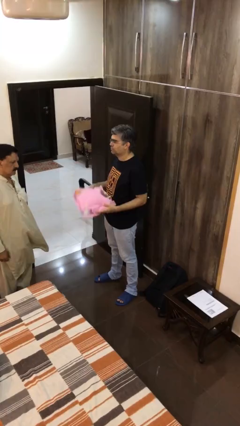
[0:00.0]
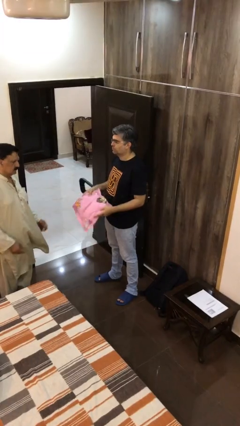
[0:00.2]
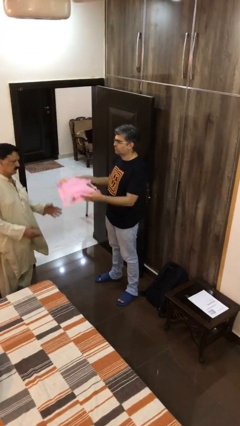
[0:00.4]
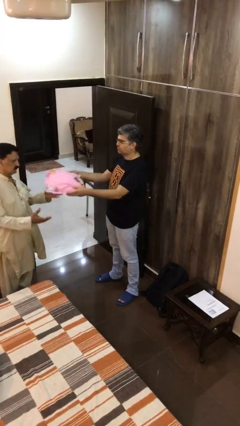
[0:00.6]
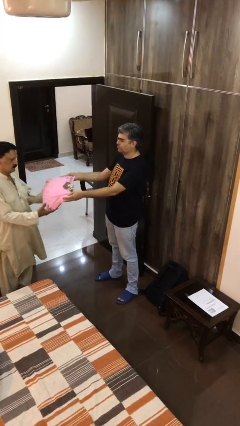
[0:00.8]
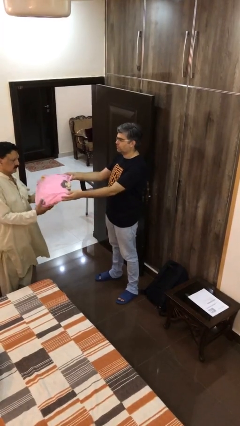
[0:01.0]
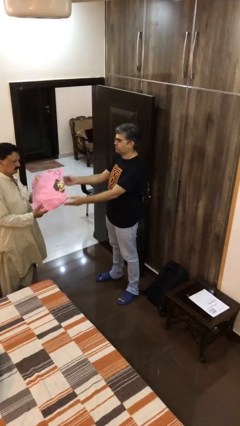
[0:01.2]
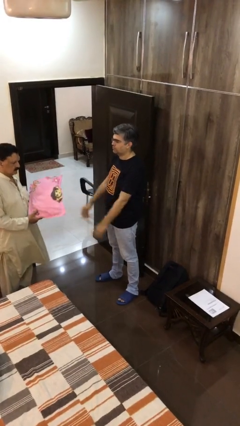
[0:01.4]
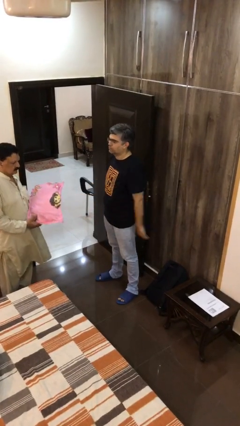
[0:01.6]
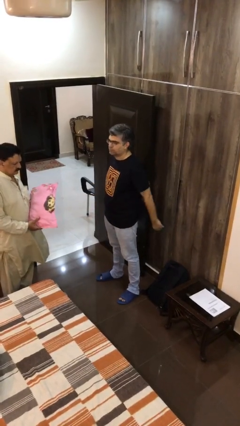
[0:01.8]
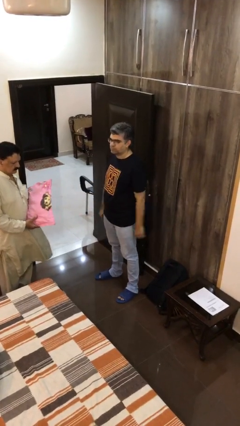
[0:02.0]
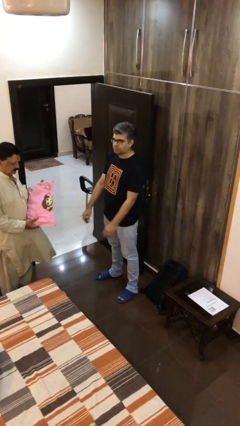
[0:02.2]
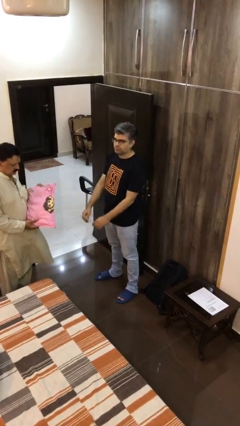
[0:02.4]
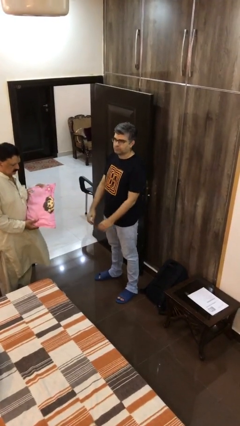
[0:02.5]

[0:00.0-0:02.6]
person transfers object to person

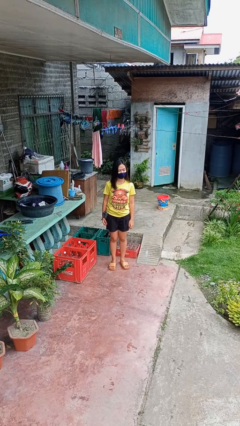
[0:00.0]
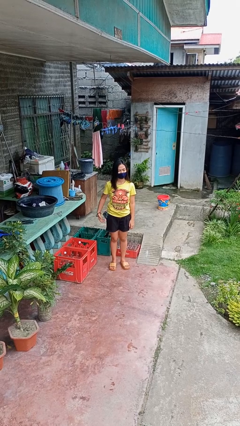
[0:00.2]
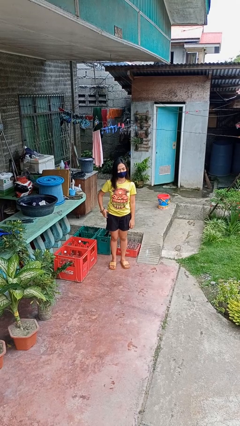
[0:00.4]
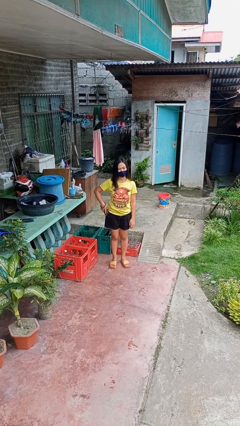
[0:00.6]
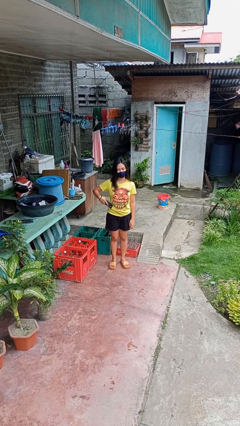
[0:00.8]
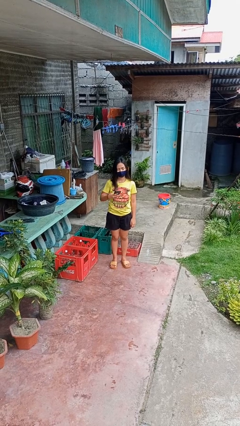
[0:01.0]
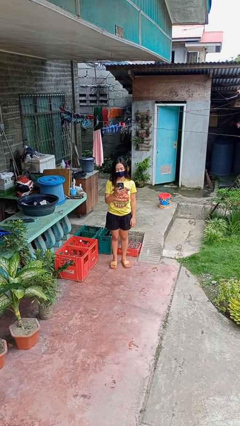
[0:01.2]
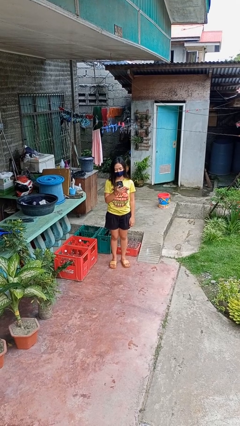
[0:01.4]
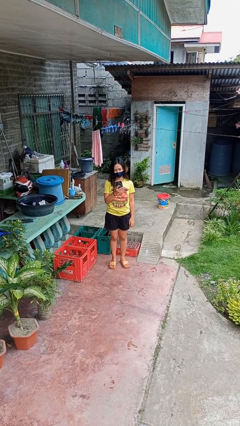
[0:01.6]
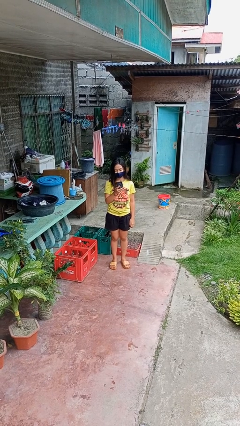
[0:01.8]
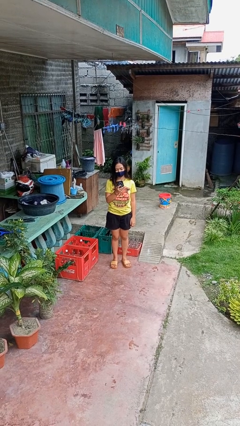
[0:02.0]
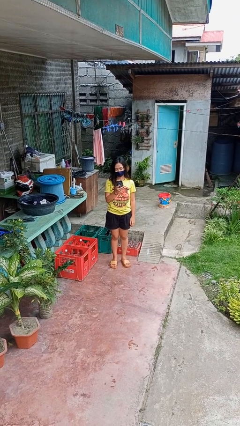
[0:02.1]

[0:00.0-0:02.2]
person takes phone from pocket

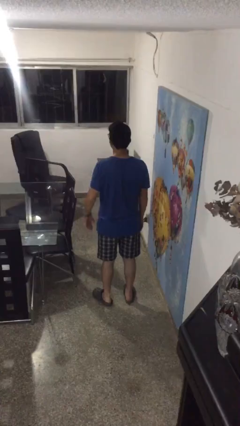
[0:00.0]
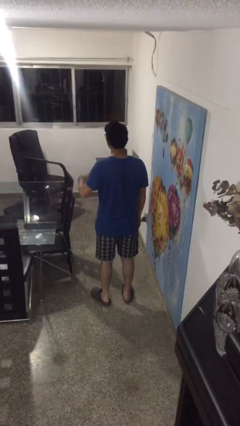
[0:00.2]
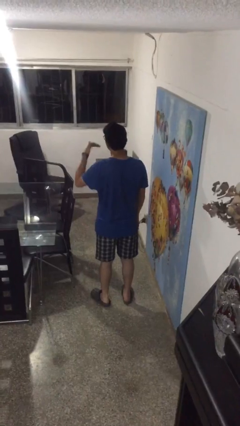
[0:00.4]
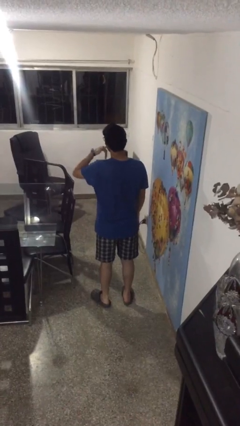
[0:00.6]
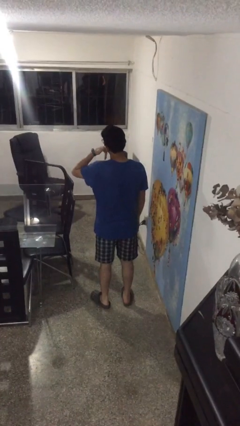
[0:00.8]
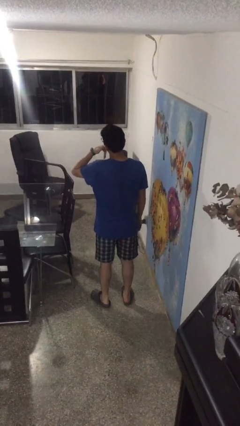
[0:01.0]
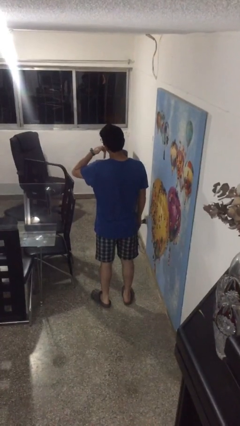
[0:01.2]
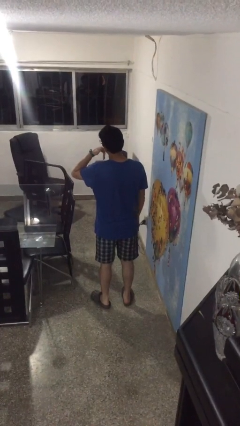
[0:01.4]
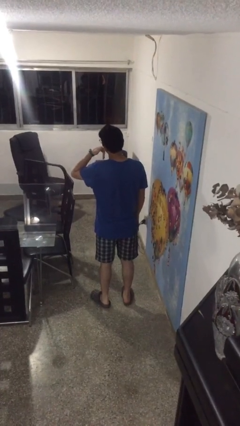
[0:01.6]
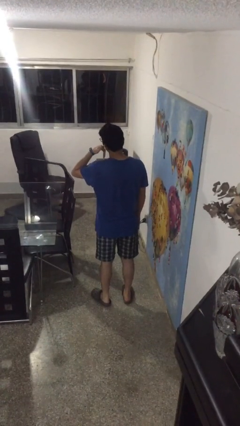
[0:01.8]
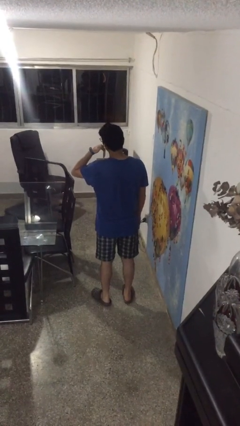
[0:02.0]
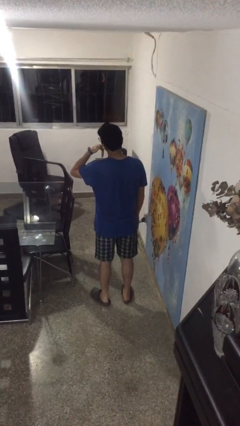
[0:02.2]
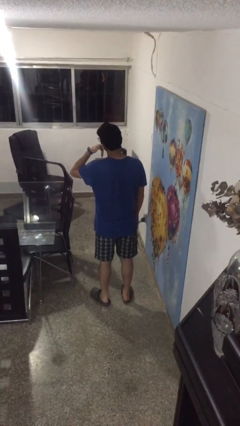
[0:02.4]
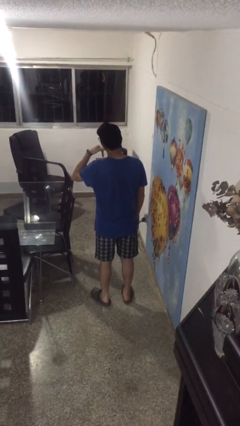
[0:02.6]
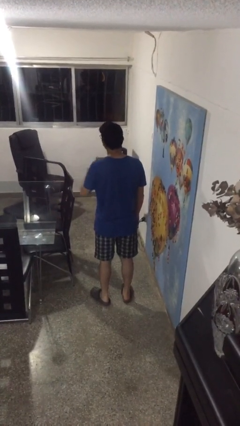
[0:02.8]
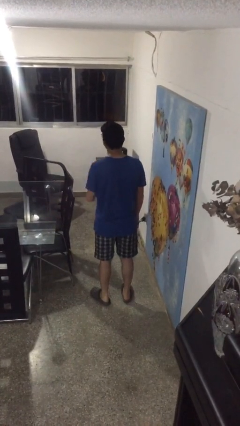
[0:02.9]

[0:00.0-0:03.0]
person gestures call me

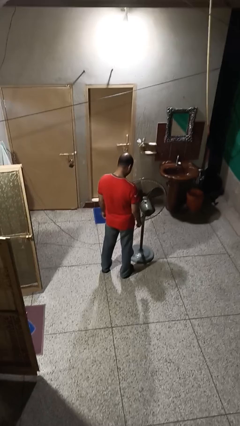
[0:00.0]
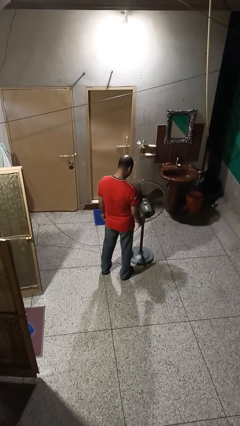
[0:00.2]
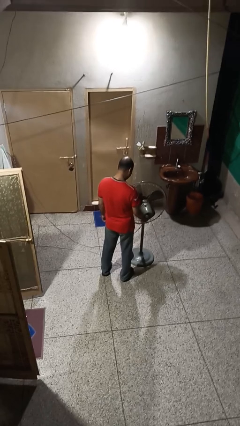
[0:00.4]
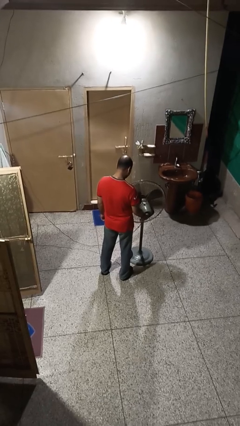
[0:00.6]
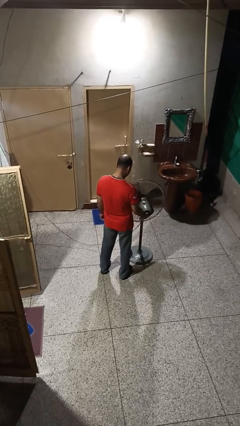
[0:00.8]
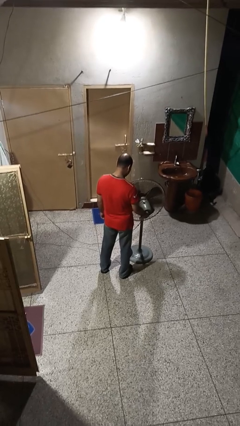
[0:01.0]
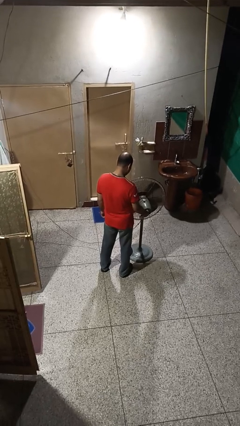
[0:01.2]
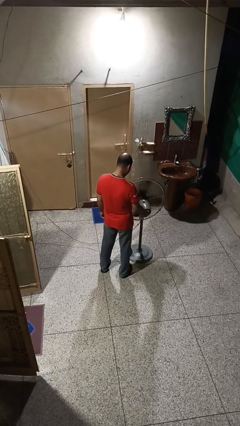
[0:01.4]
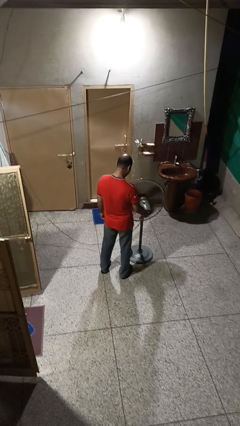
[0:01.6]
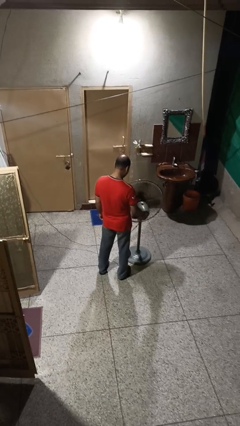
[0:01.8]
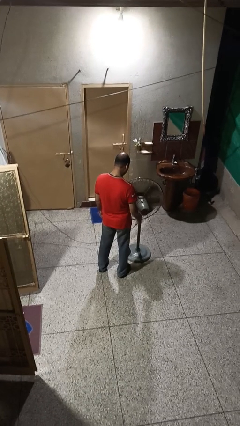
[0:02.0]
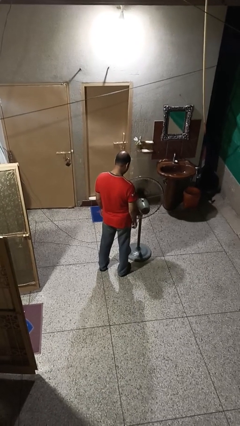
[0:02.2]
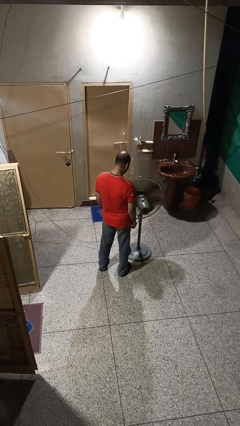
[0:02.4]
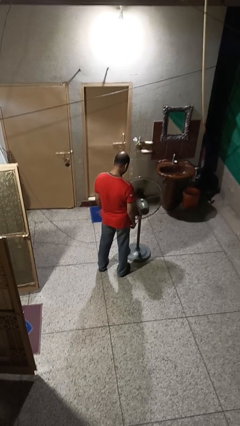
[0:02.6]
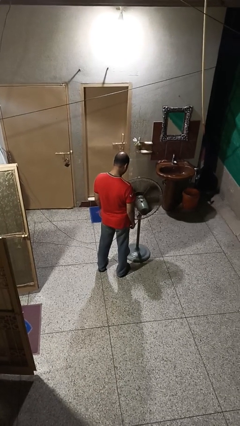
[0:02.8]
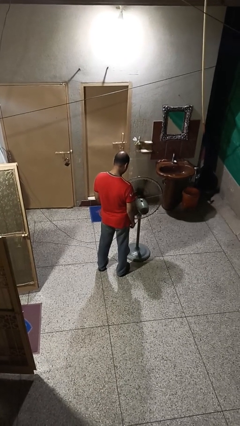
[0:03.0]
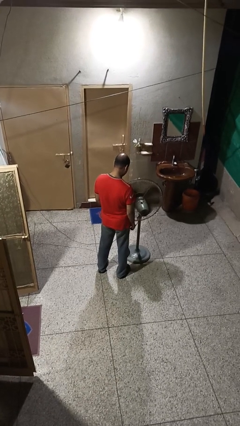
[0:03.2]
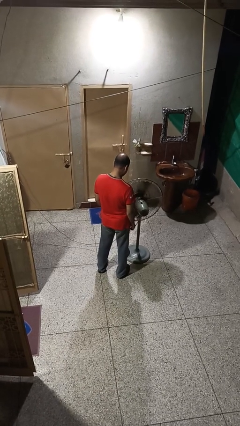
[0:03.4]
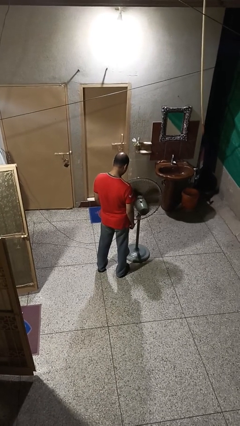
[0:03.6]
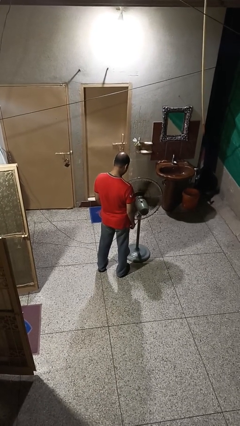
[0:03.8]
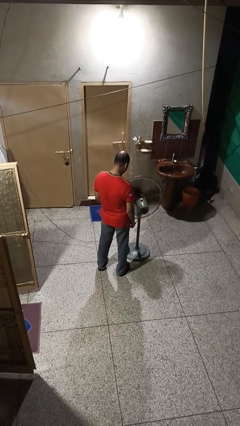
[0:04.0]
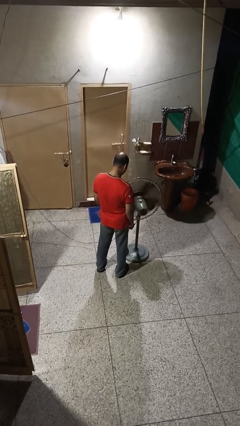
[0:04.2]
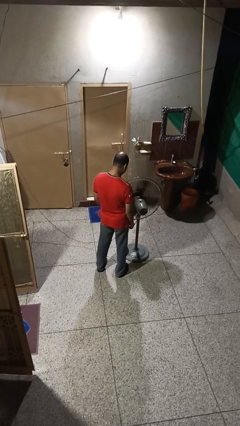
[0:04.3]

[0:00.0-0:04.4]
person turns on fan

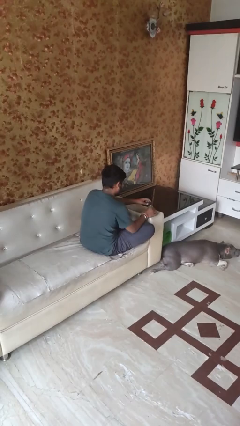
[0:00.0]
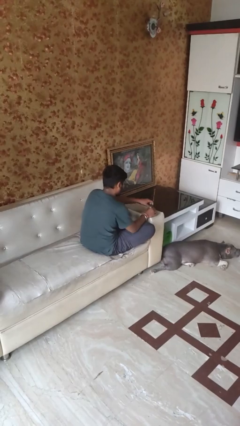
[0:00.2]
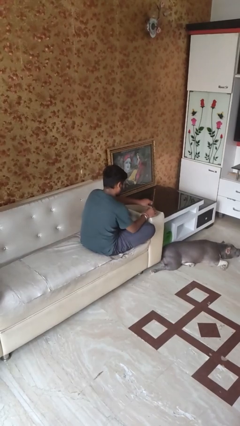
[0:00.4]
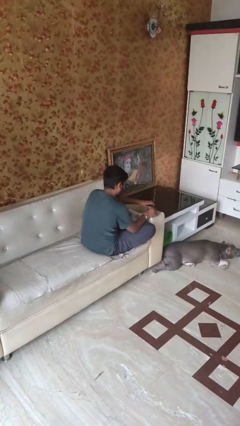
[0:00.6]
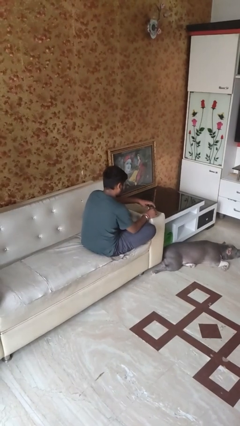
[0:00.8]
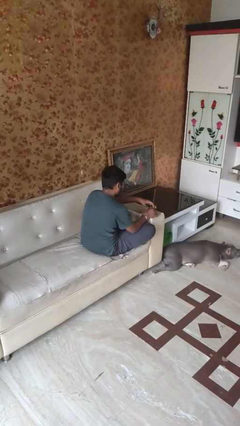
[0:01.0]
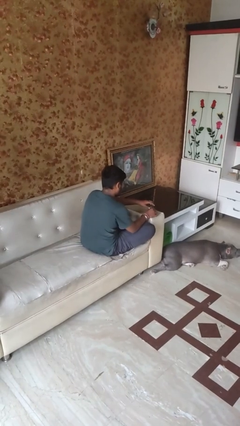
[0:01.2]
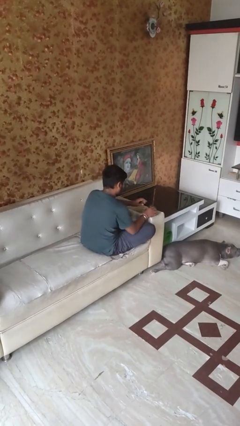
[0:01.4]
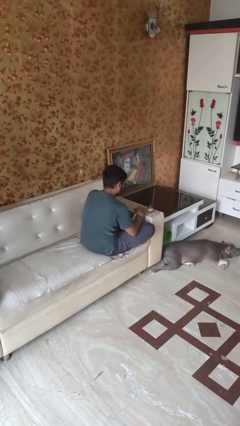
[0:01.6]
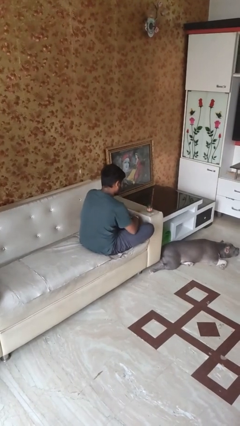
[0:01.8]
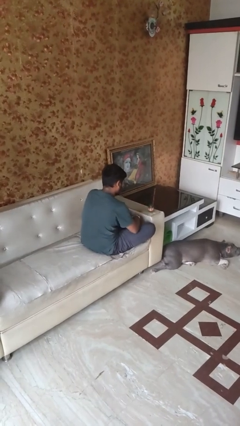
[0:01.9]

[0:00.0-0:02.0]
person closes jar

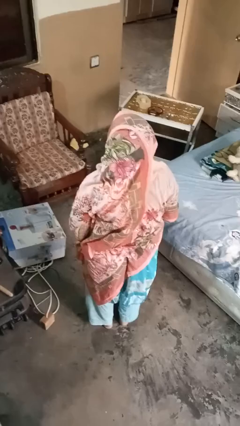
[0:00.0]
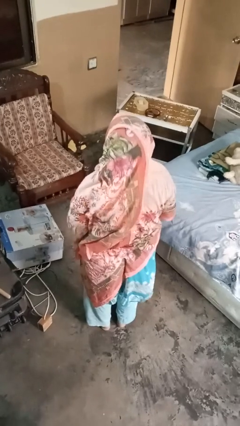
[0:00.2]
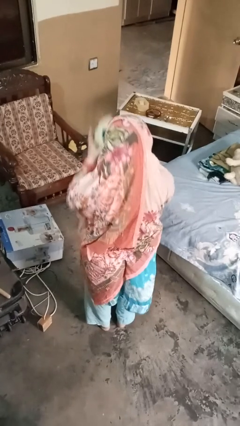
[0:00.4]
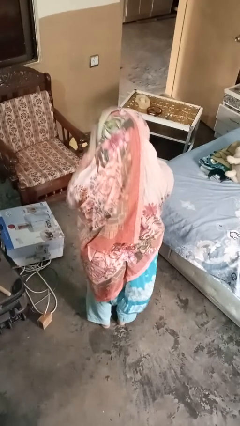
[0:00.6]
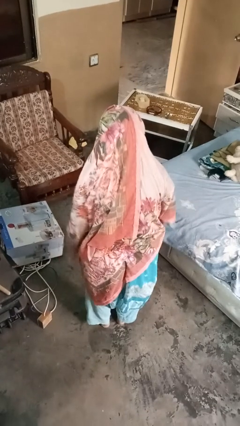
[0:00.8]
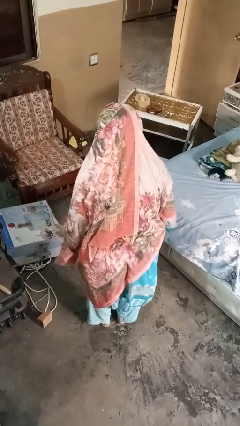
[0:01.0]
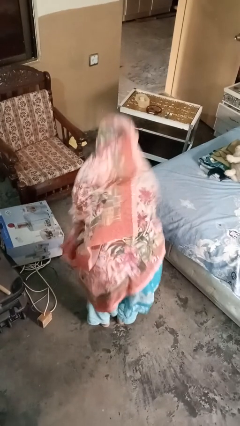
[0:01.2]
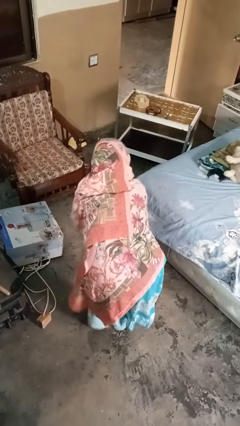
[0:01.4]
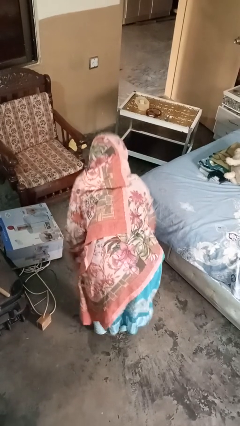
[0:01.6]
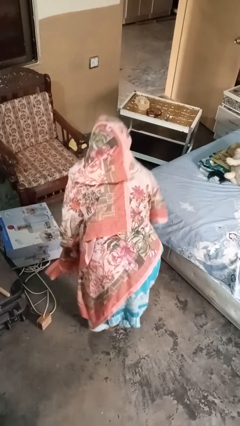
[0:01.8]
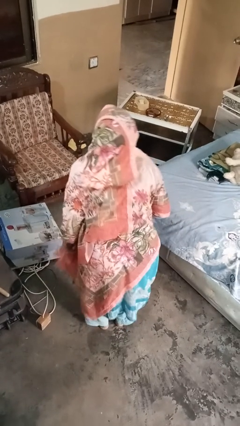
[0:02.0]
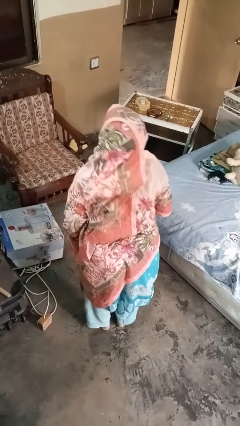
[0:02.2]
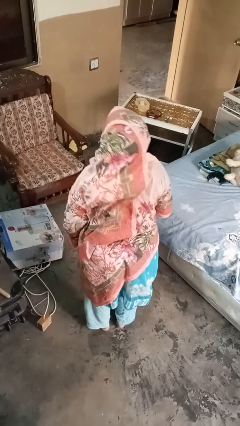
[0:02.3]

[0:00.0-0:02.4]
person bounces ball on floor

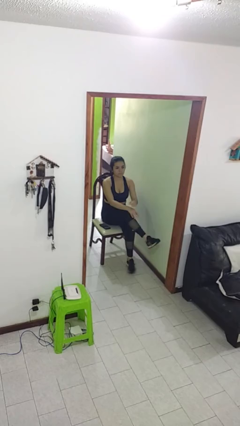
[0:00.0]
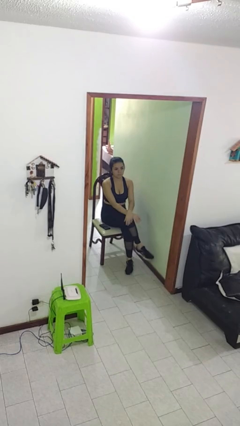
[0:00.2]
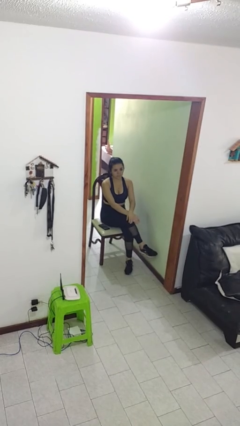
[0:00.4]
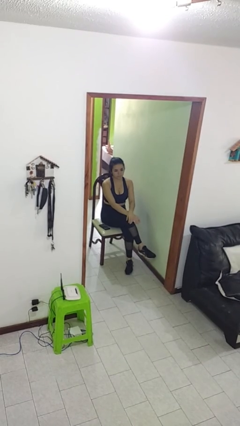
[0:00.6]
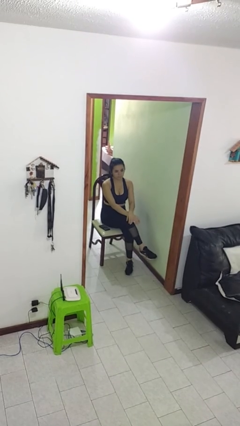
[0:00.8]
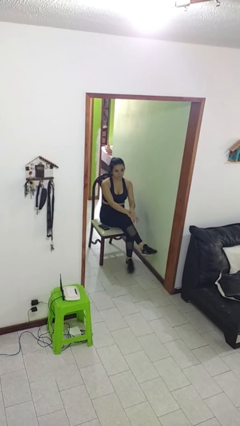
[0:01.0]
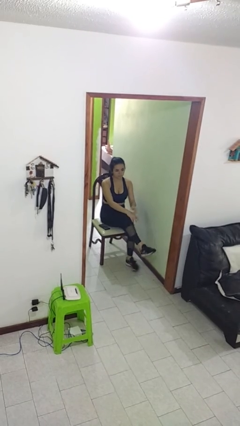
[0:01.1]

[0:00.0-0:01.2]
person crosses legs
